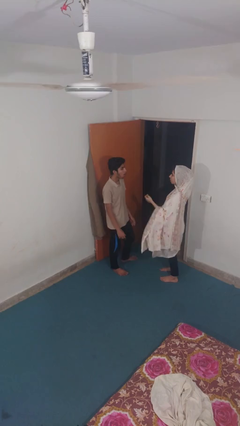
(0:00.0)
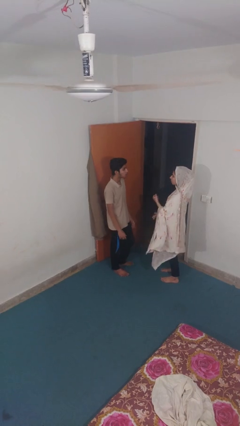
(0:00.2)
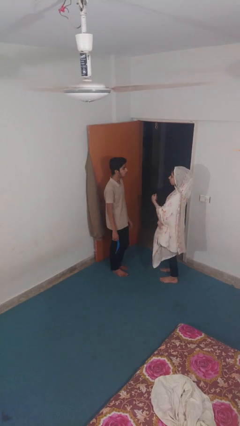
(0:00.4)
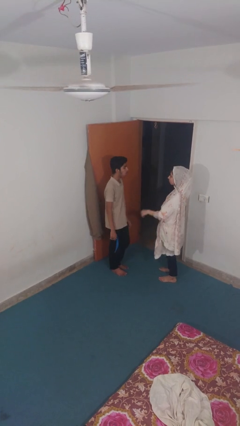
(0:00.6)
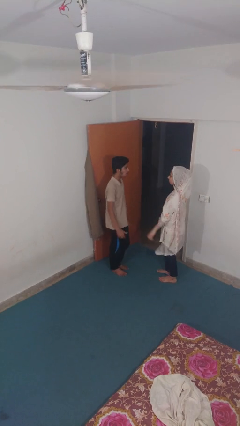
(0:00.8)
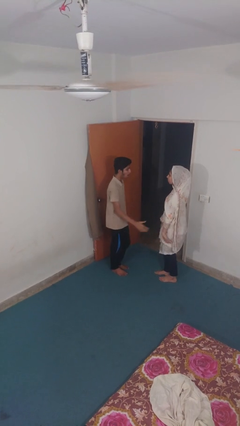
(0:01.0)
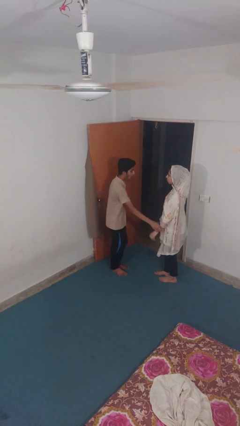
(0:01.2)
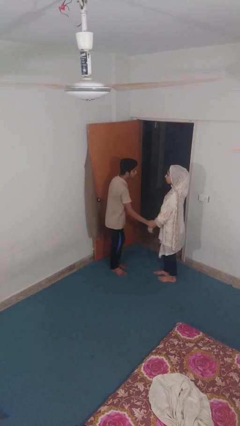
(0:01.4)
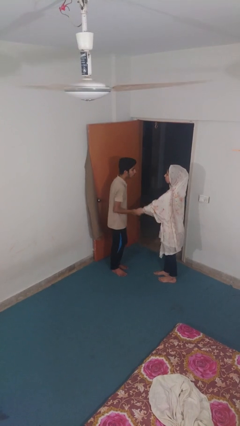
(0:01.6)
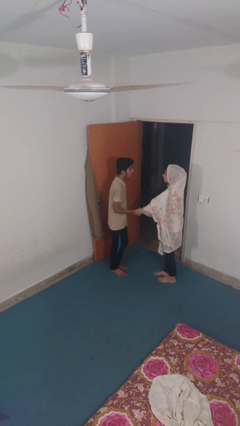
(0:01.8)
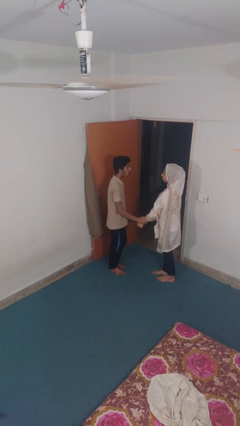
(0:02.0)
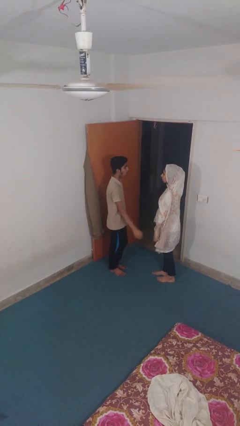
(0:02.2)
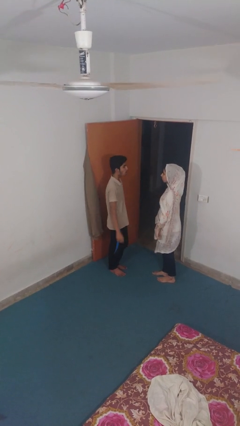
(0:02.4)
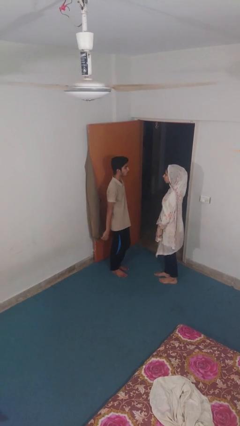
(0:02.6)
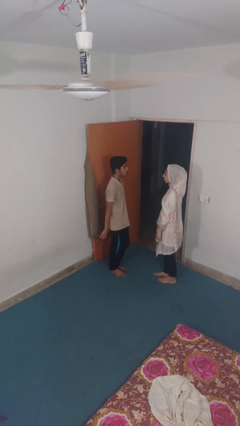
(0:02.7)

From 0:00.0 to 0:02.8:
person grabs person by forearm

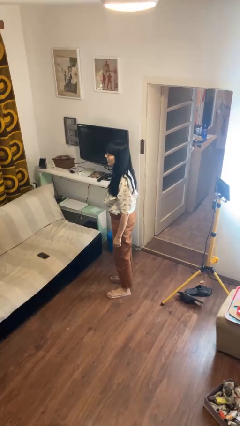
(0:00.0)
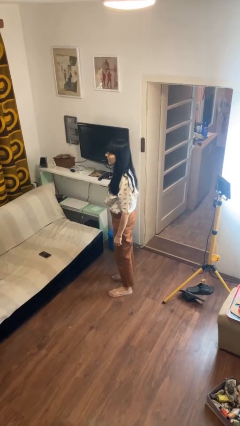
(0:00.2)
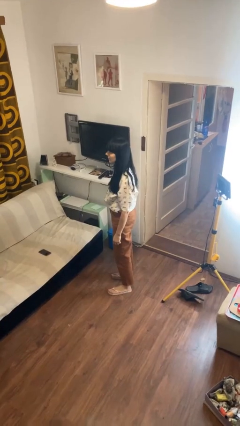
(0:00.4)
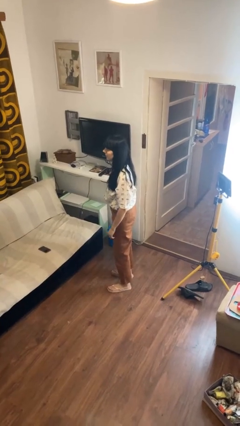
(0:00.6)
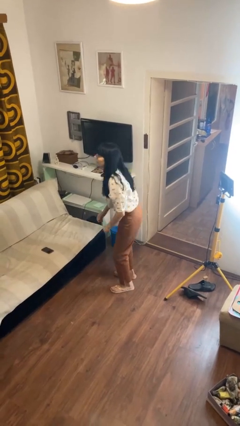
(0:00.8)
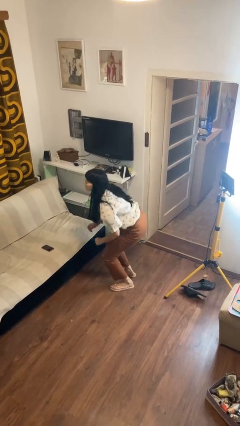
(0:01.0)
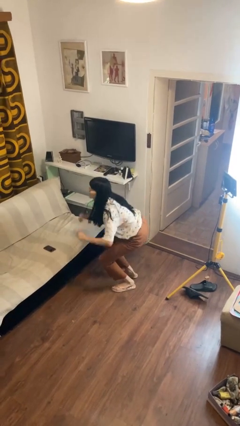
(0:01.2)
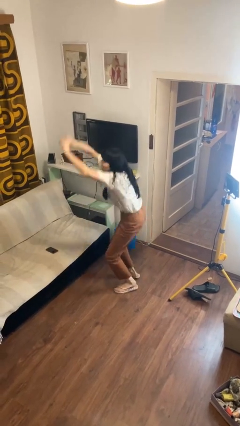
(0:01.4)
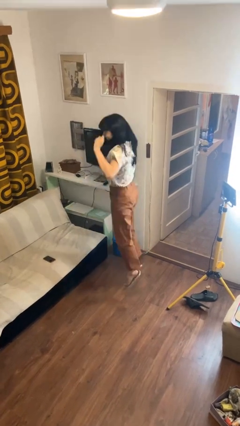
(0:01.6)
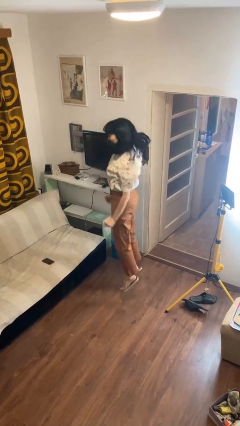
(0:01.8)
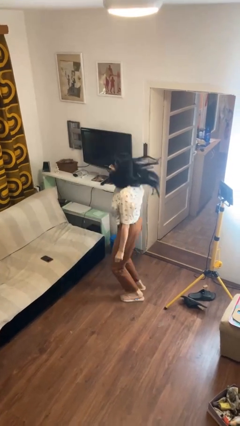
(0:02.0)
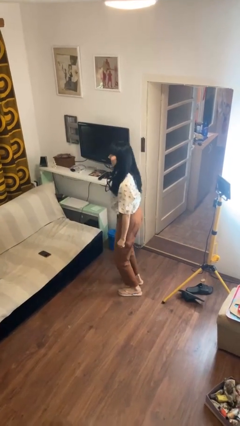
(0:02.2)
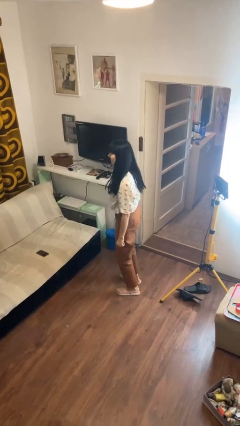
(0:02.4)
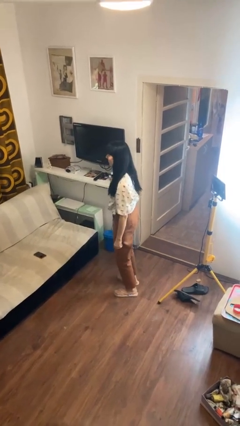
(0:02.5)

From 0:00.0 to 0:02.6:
person jumps

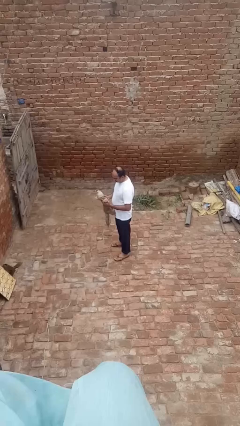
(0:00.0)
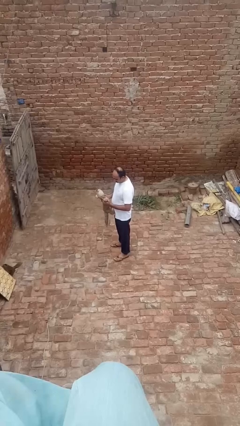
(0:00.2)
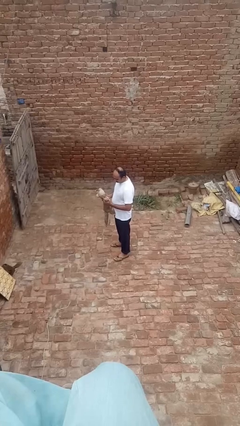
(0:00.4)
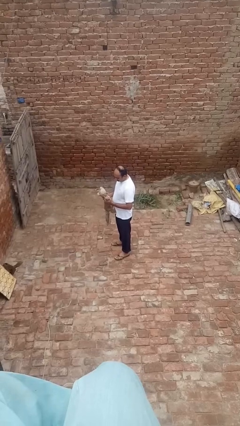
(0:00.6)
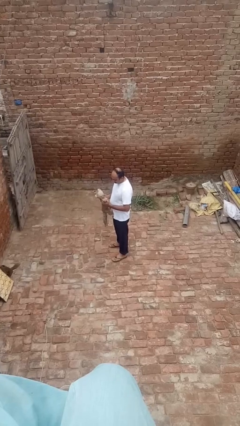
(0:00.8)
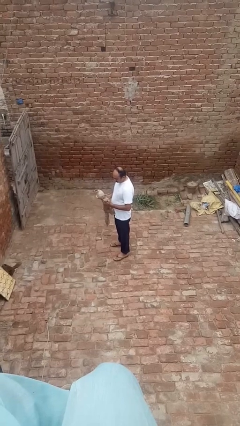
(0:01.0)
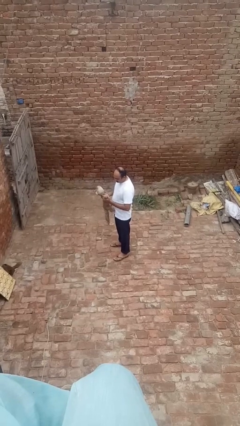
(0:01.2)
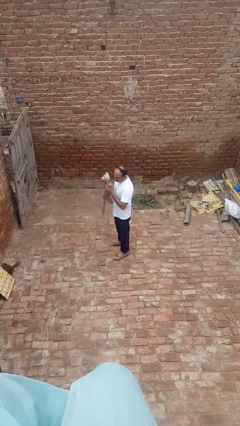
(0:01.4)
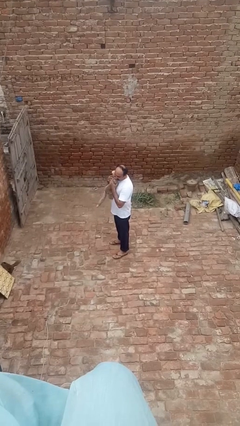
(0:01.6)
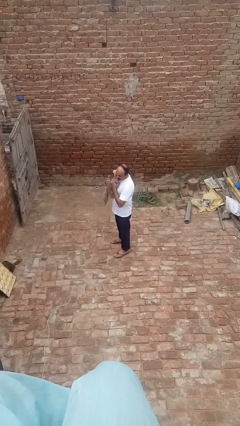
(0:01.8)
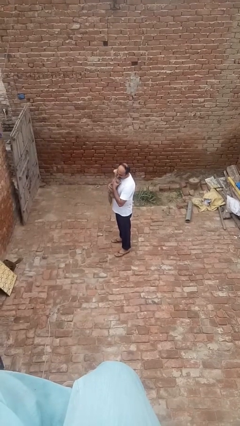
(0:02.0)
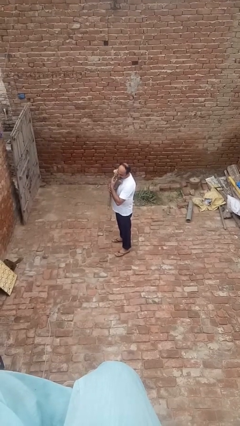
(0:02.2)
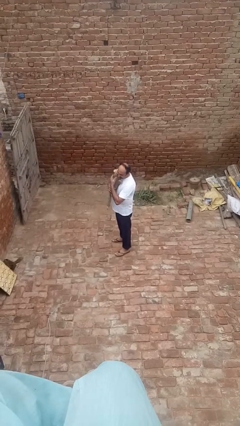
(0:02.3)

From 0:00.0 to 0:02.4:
person hugs stuffed animal

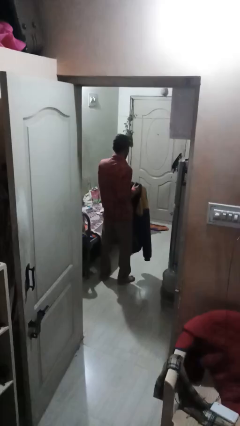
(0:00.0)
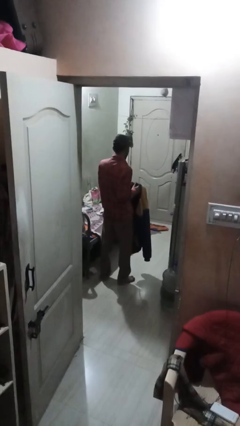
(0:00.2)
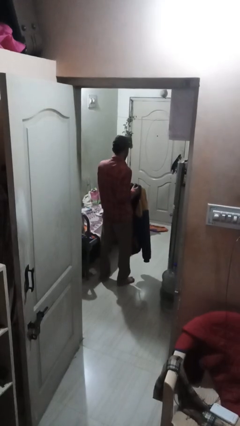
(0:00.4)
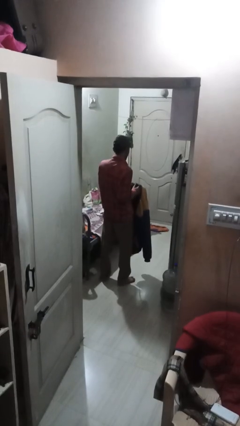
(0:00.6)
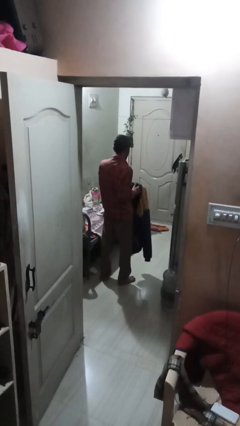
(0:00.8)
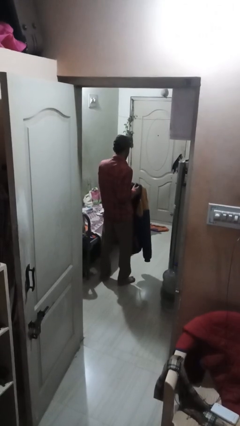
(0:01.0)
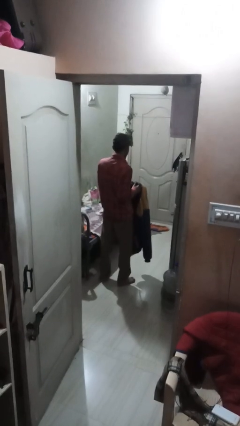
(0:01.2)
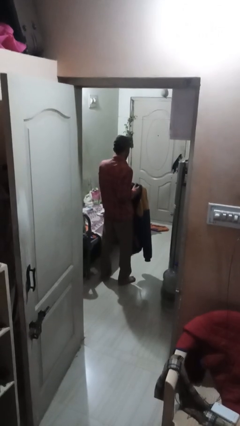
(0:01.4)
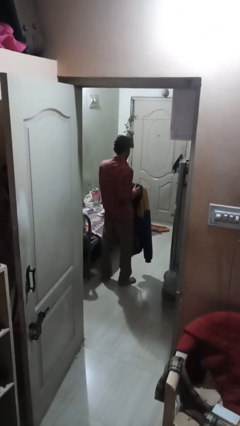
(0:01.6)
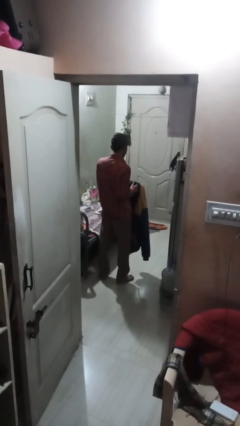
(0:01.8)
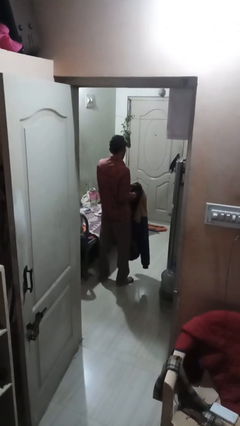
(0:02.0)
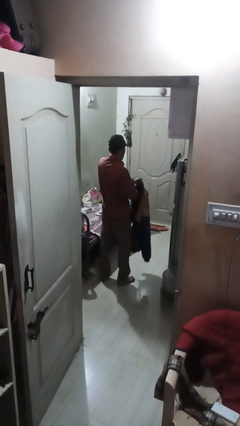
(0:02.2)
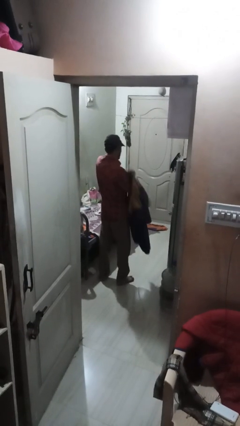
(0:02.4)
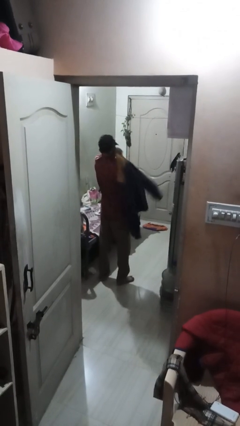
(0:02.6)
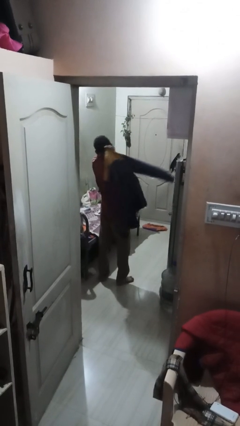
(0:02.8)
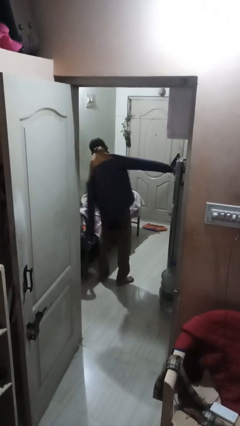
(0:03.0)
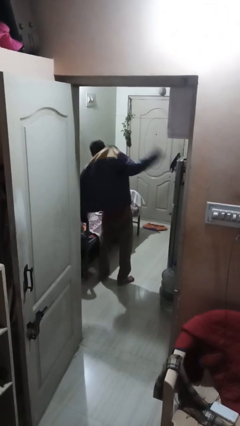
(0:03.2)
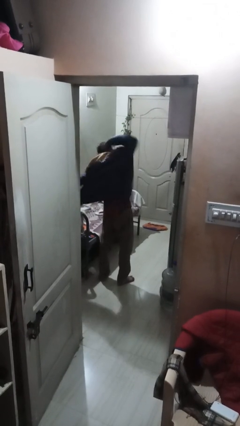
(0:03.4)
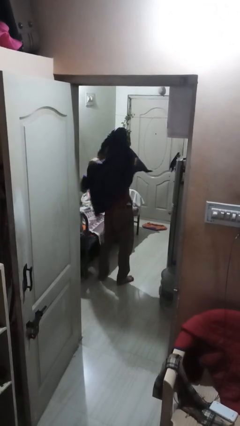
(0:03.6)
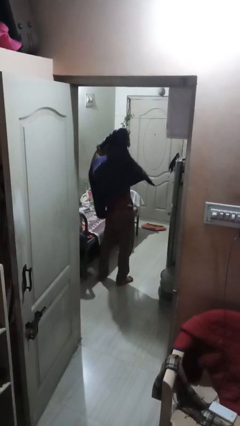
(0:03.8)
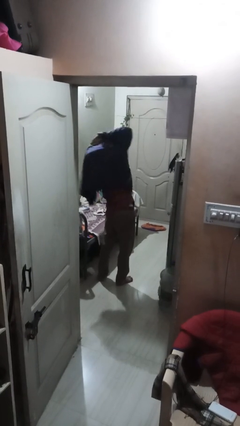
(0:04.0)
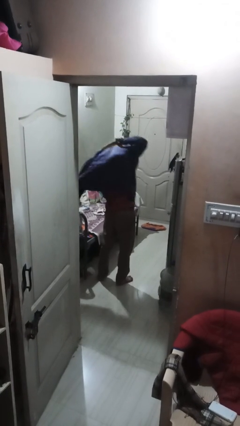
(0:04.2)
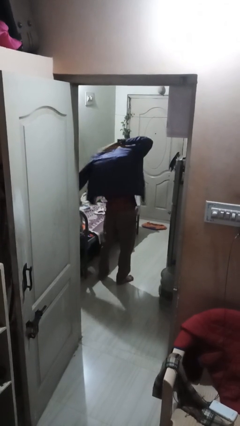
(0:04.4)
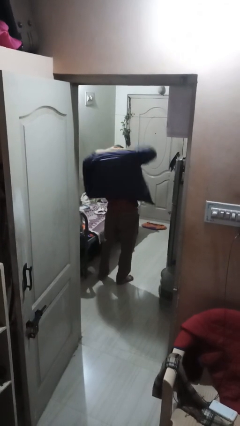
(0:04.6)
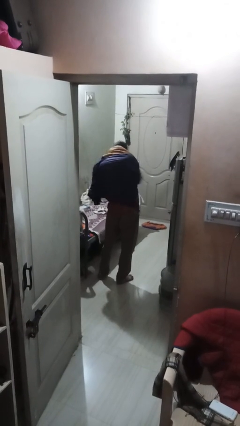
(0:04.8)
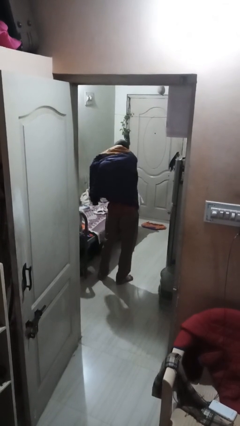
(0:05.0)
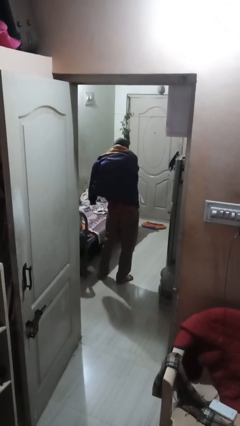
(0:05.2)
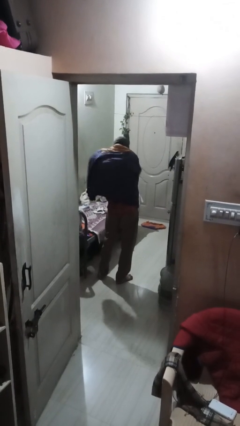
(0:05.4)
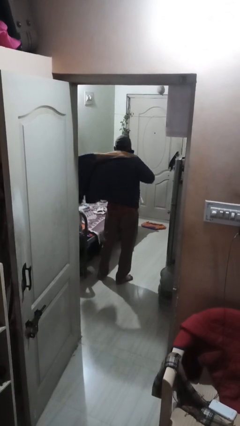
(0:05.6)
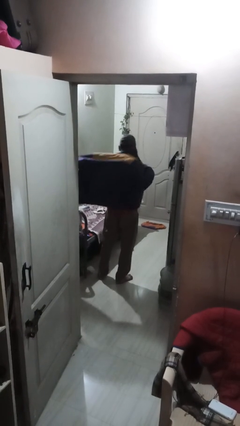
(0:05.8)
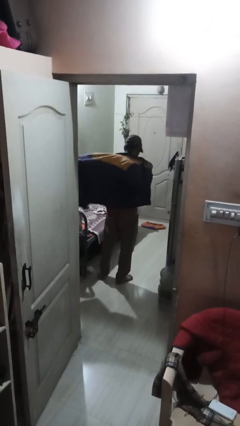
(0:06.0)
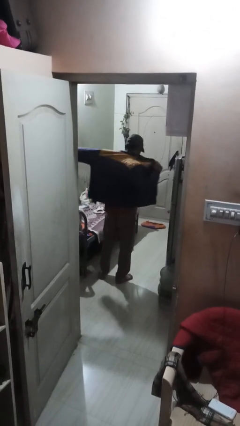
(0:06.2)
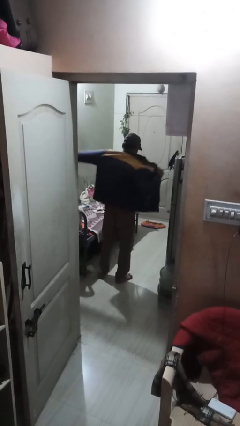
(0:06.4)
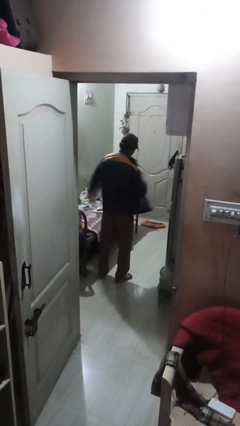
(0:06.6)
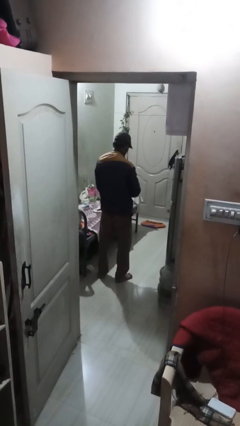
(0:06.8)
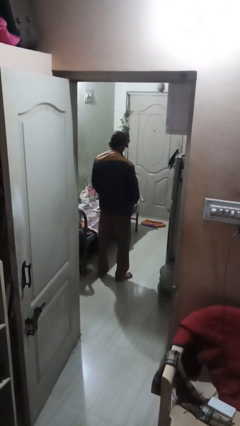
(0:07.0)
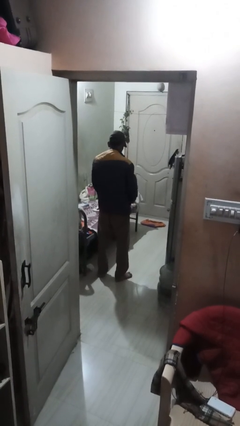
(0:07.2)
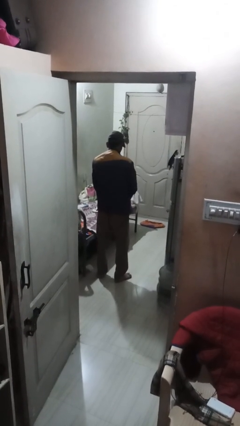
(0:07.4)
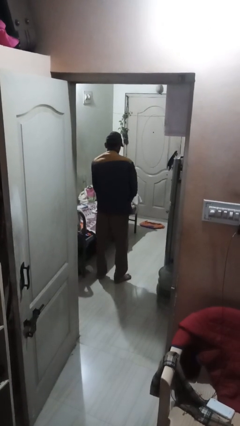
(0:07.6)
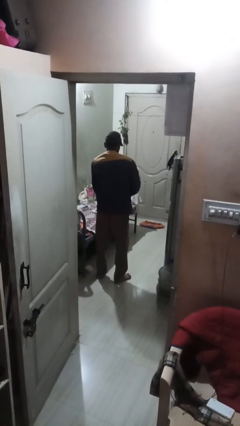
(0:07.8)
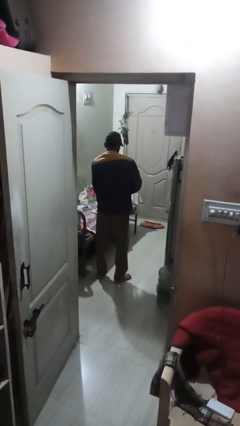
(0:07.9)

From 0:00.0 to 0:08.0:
person puts on jacket

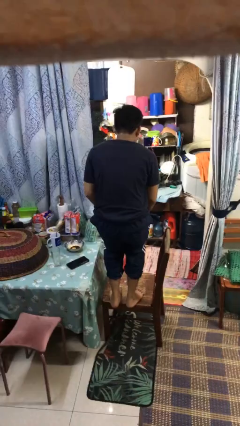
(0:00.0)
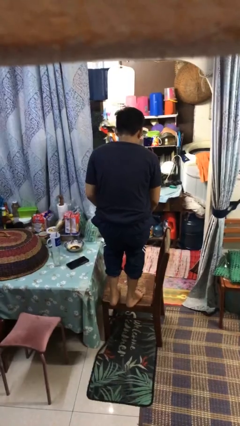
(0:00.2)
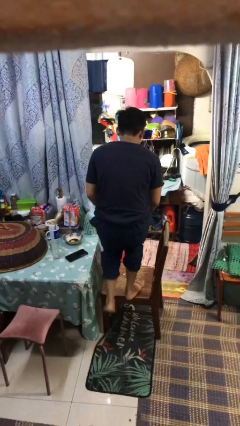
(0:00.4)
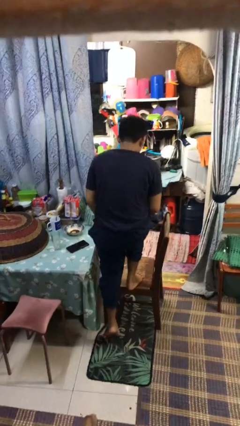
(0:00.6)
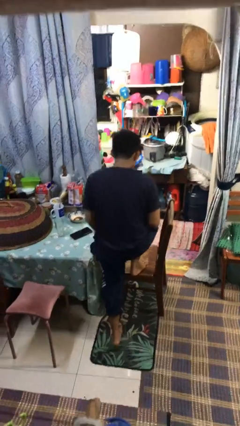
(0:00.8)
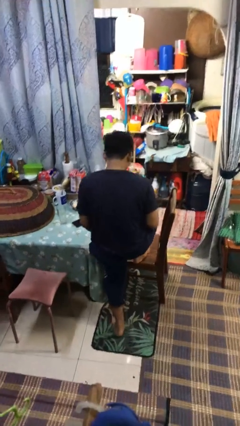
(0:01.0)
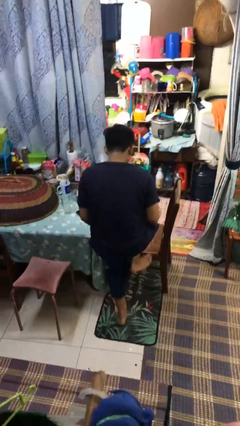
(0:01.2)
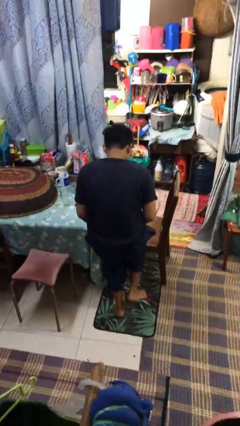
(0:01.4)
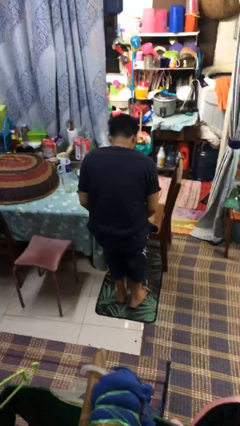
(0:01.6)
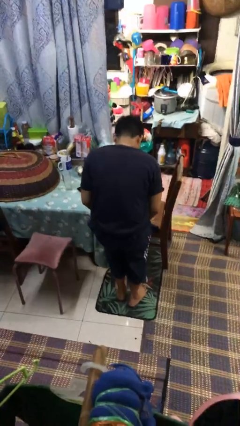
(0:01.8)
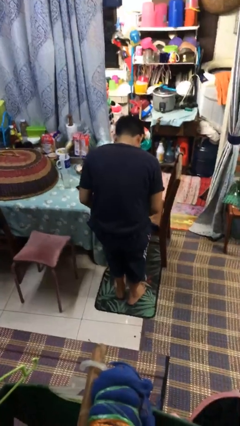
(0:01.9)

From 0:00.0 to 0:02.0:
person climbs off chair
